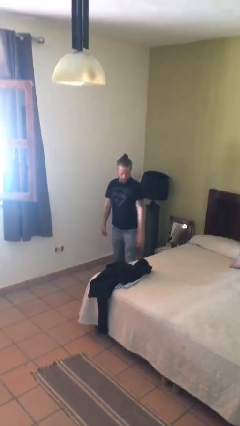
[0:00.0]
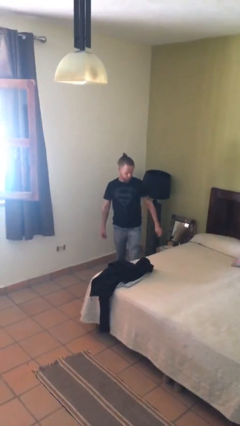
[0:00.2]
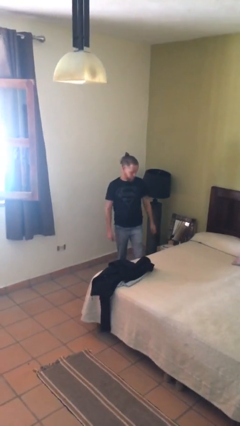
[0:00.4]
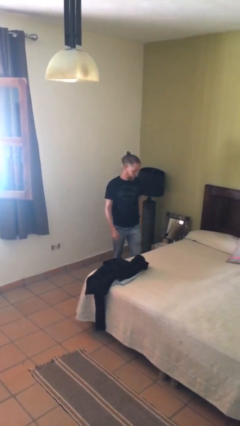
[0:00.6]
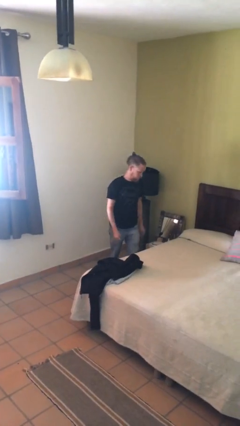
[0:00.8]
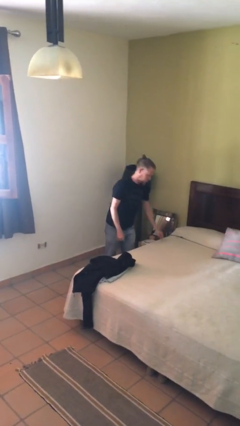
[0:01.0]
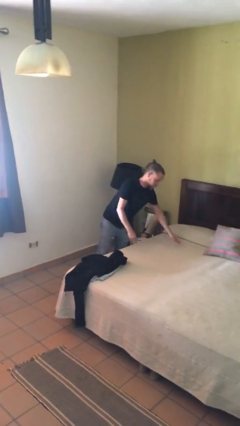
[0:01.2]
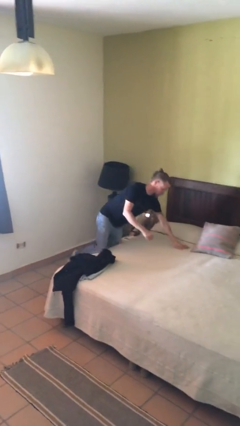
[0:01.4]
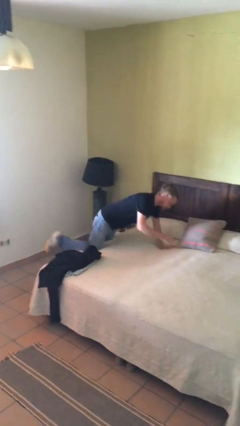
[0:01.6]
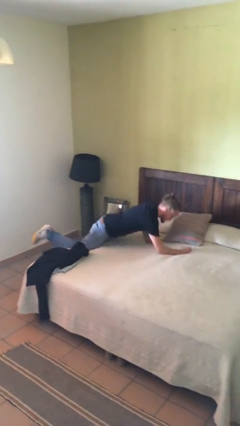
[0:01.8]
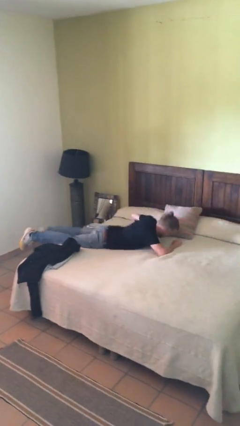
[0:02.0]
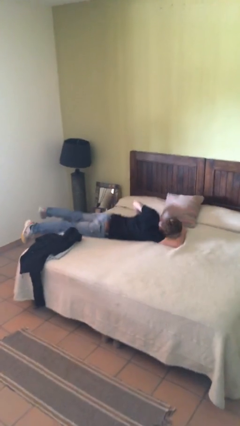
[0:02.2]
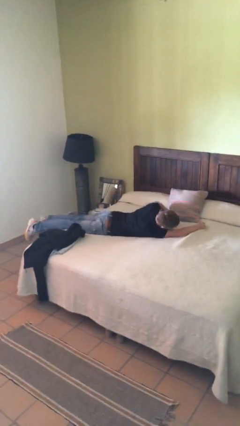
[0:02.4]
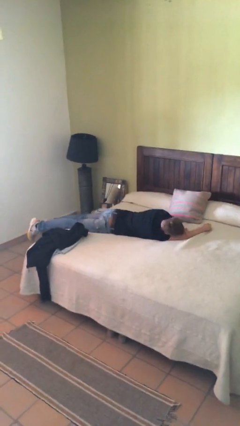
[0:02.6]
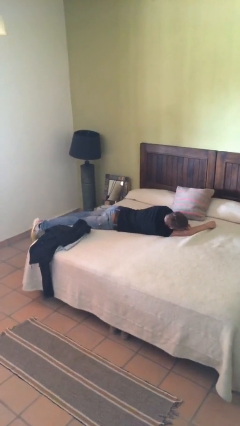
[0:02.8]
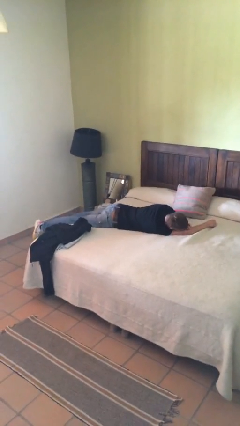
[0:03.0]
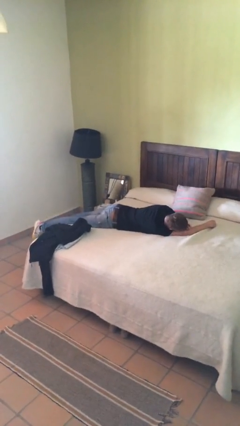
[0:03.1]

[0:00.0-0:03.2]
person lies down on bed

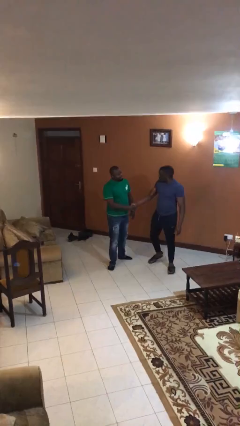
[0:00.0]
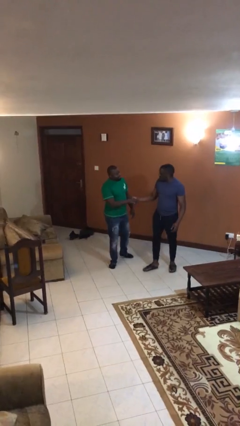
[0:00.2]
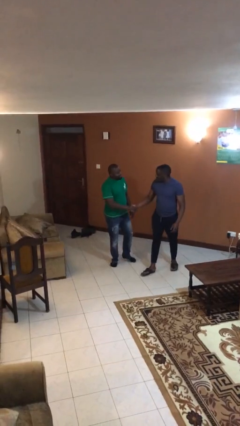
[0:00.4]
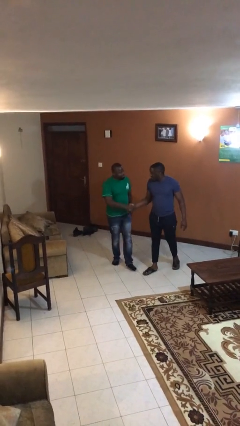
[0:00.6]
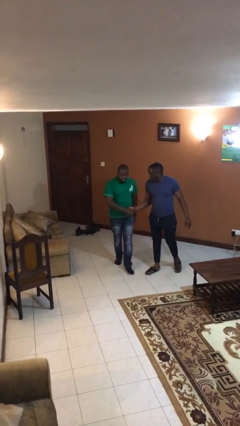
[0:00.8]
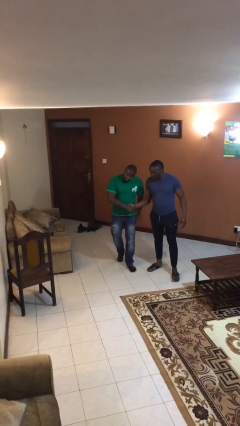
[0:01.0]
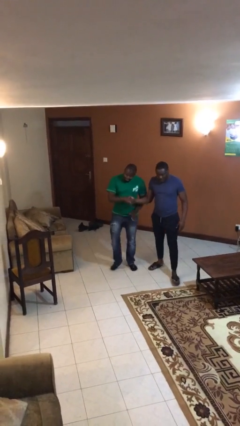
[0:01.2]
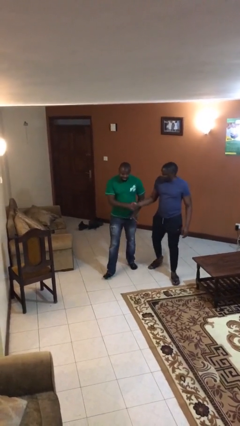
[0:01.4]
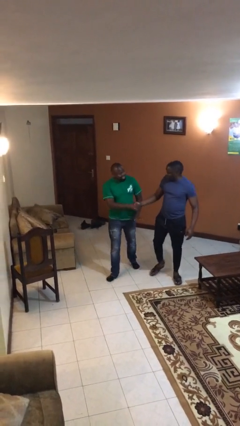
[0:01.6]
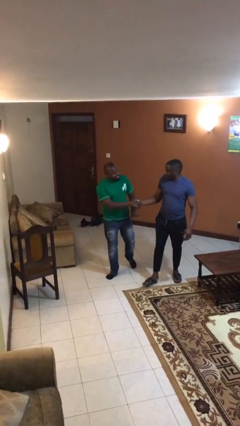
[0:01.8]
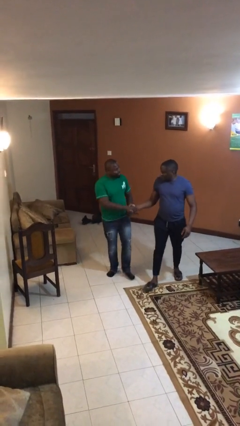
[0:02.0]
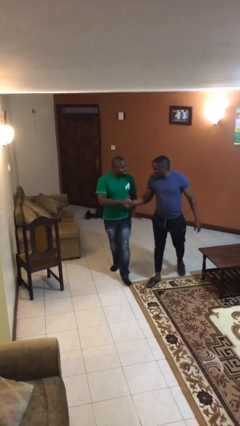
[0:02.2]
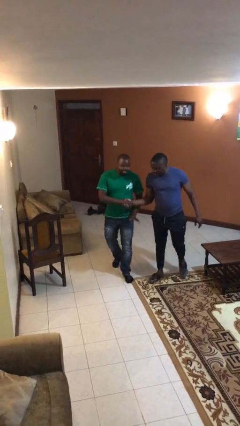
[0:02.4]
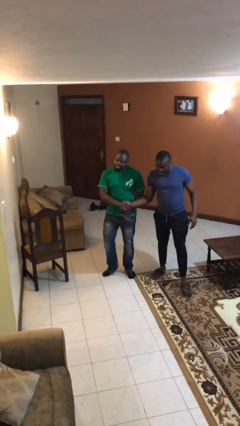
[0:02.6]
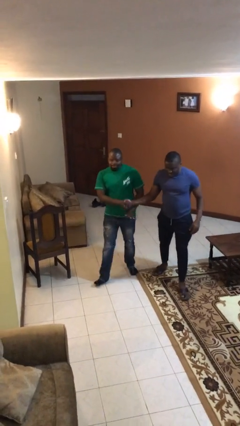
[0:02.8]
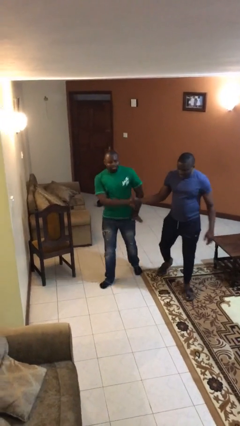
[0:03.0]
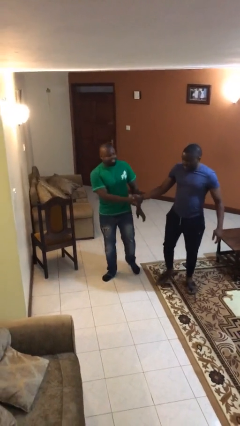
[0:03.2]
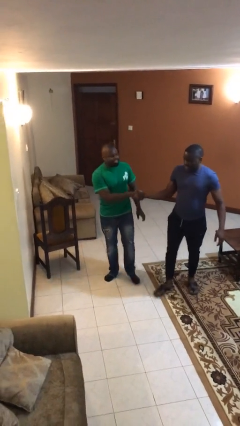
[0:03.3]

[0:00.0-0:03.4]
person holds hand

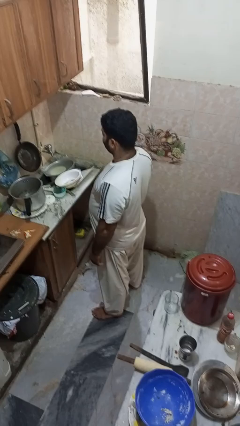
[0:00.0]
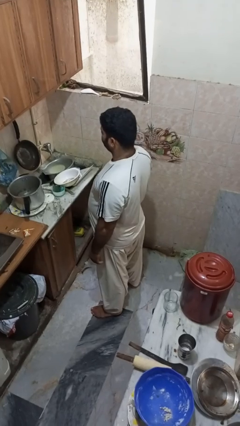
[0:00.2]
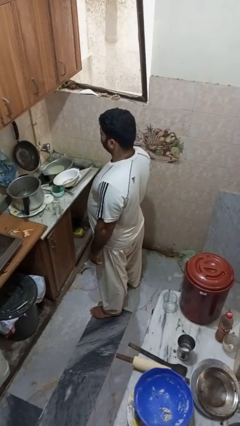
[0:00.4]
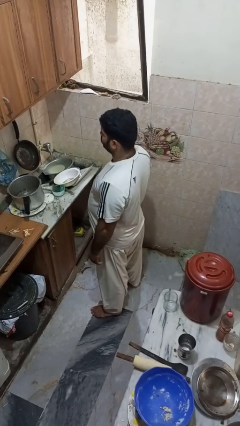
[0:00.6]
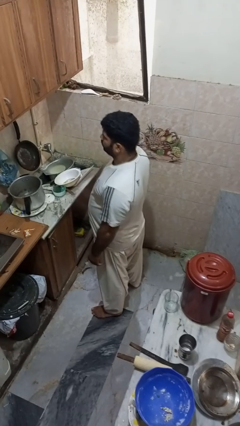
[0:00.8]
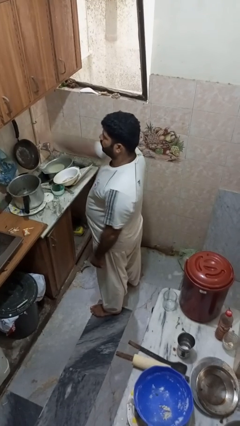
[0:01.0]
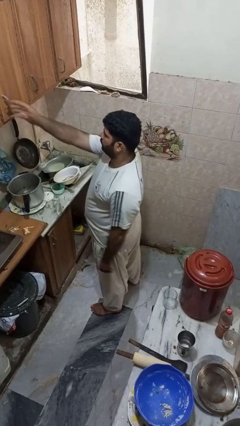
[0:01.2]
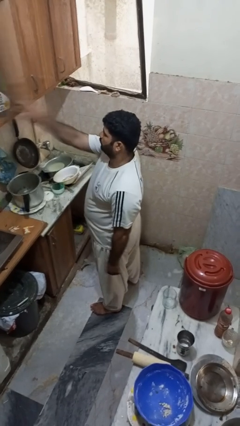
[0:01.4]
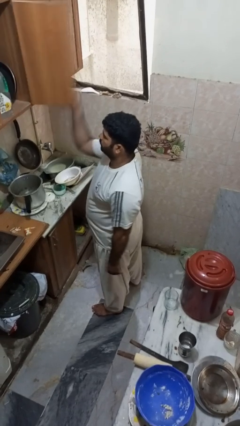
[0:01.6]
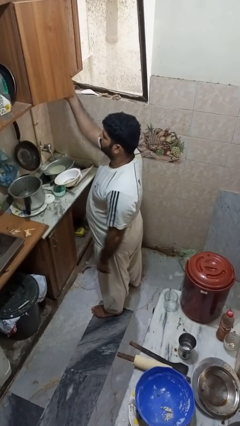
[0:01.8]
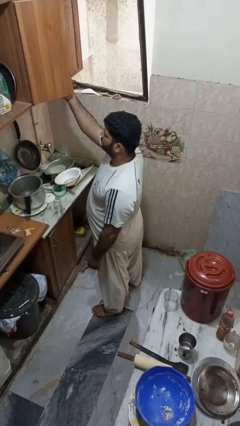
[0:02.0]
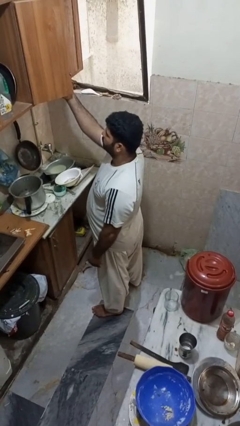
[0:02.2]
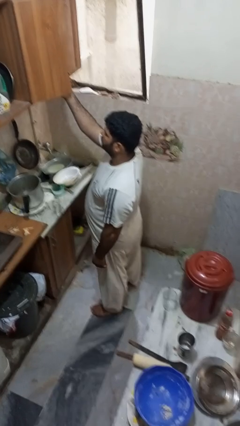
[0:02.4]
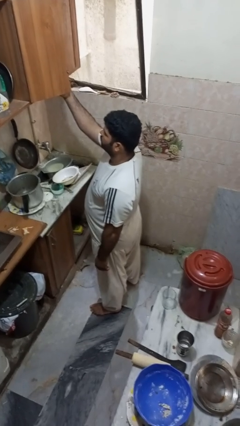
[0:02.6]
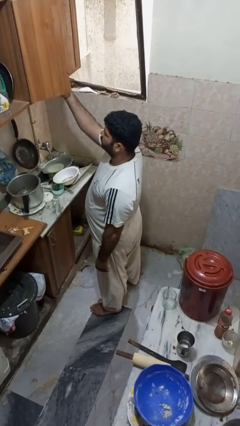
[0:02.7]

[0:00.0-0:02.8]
person opens cabinet

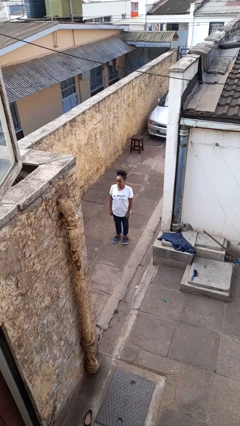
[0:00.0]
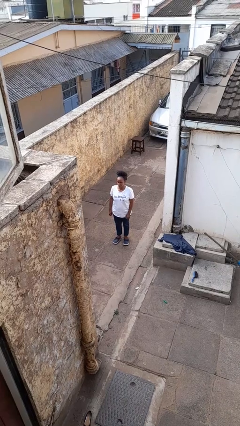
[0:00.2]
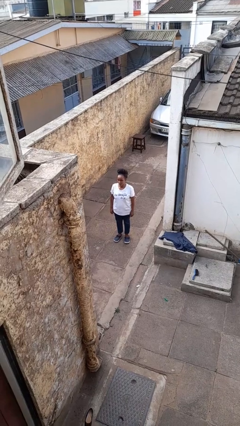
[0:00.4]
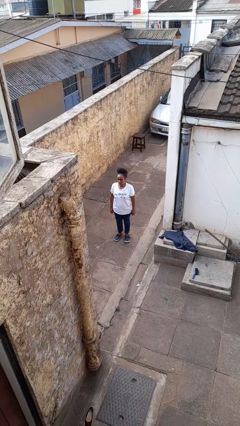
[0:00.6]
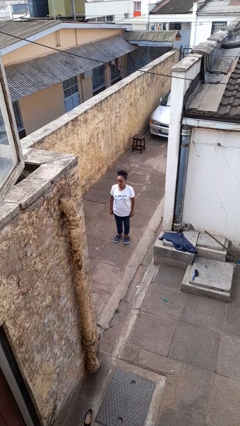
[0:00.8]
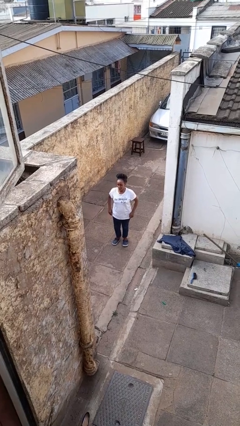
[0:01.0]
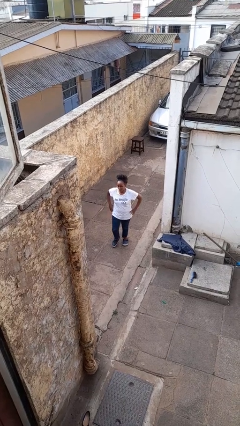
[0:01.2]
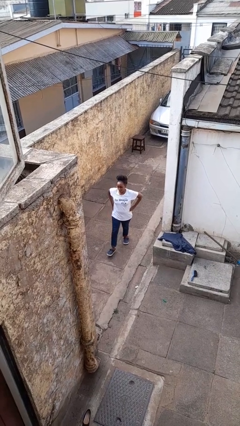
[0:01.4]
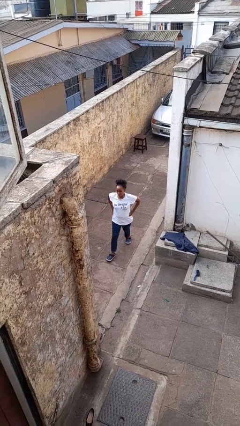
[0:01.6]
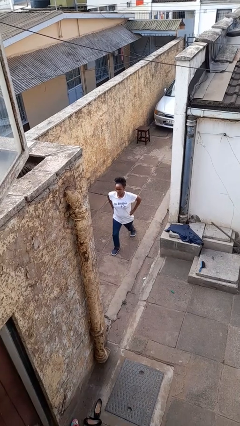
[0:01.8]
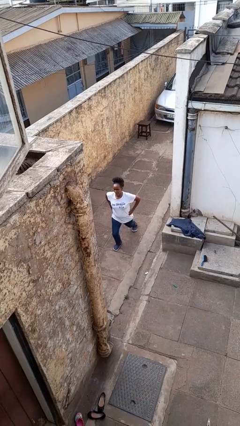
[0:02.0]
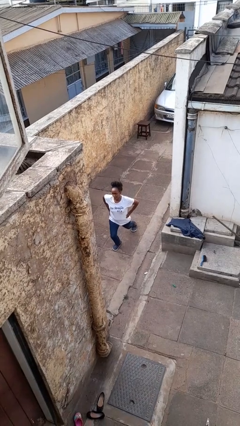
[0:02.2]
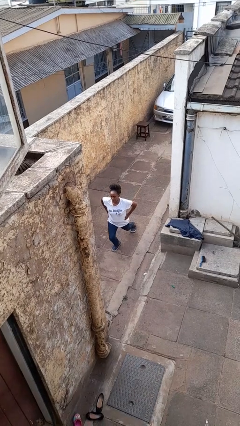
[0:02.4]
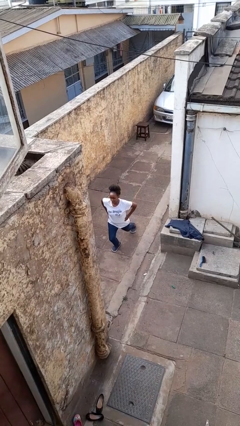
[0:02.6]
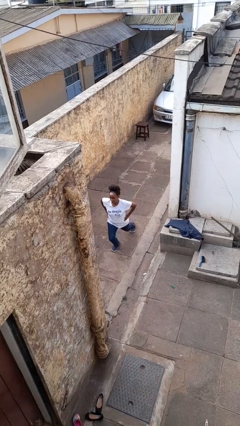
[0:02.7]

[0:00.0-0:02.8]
person exercises with lunges

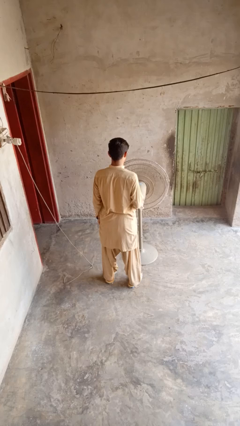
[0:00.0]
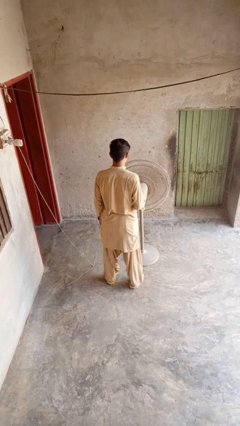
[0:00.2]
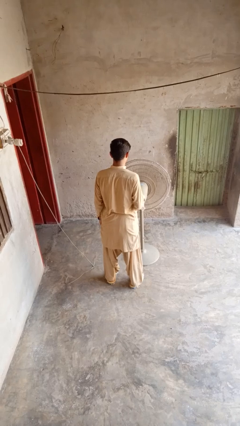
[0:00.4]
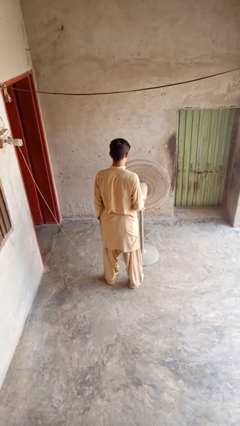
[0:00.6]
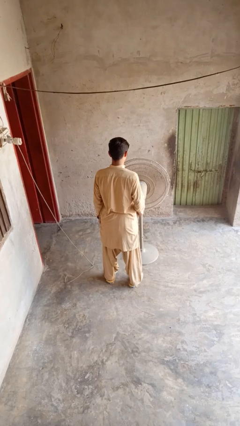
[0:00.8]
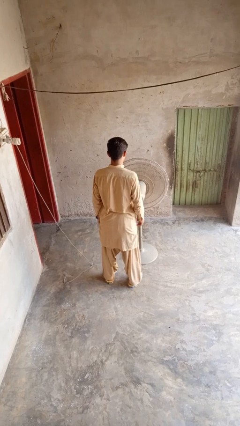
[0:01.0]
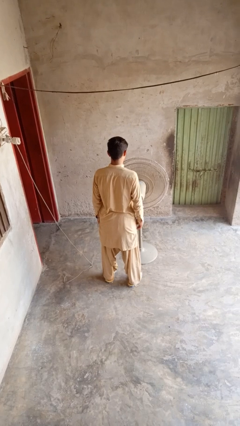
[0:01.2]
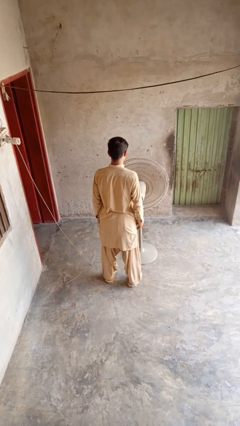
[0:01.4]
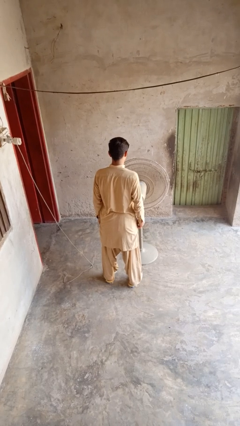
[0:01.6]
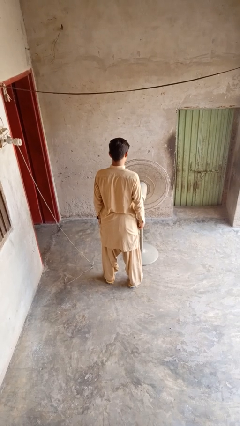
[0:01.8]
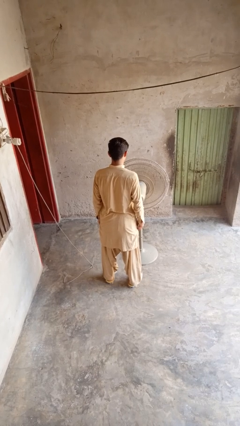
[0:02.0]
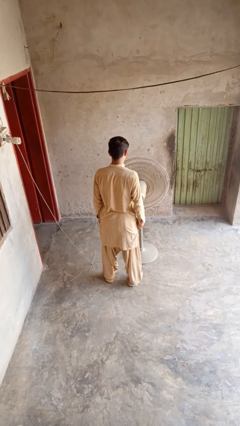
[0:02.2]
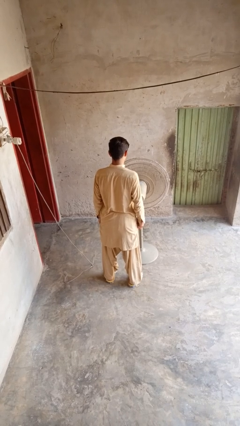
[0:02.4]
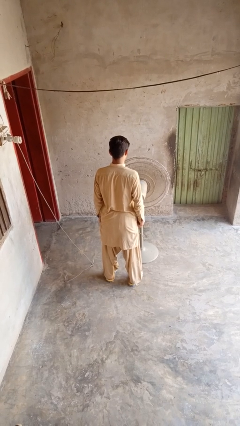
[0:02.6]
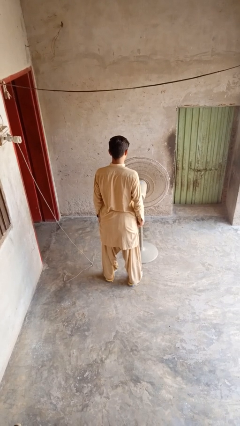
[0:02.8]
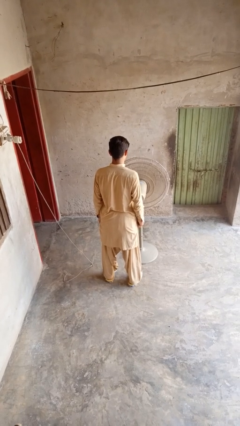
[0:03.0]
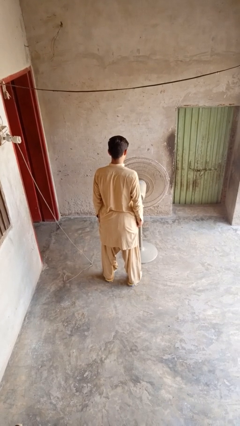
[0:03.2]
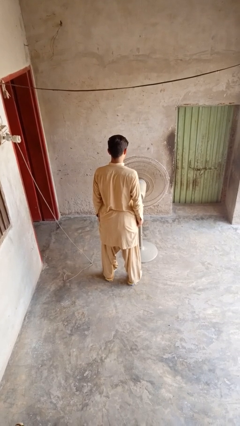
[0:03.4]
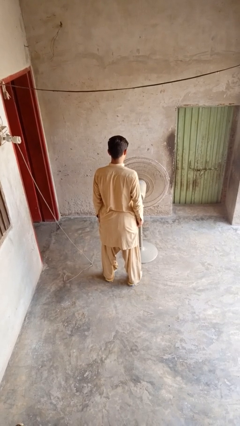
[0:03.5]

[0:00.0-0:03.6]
person turns off fan

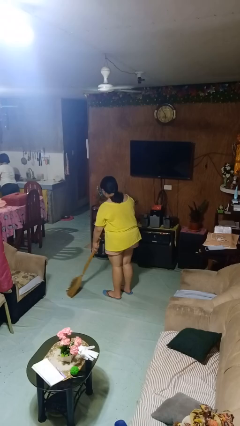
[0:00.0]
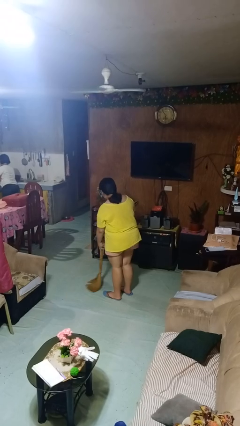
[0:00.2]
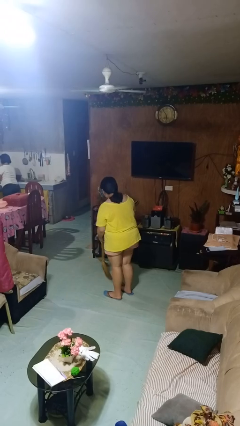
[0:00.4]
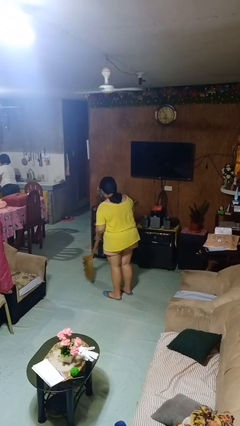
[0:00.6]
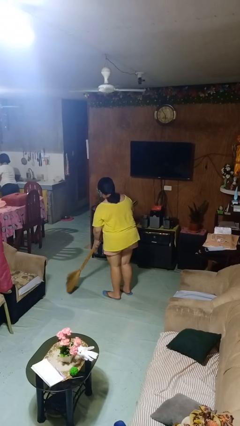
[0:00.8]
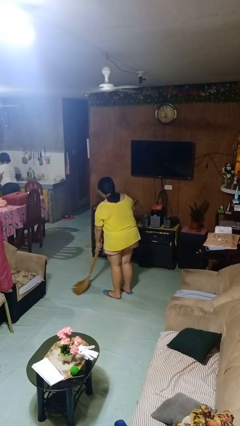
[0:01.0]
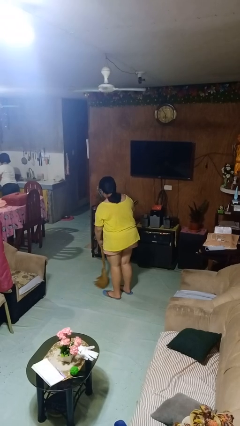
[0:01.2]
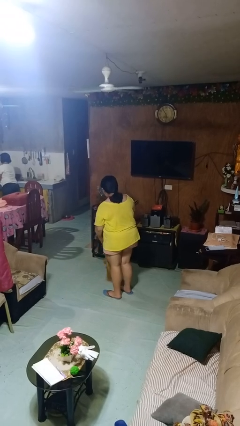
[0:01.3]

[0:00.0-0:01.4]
person sweeps floor

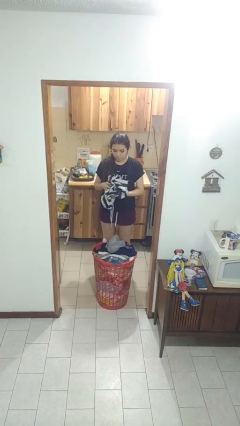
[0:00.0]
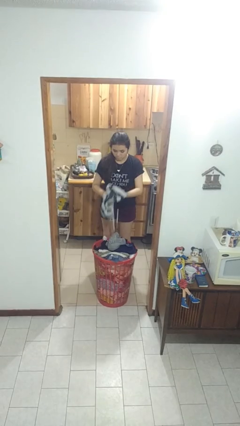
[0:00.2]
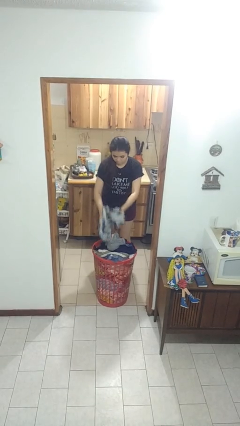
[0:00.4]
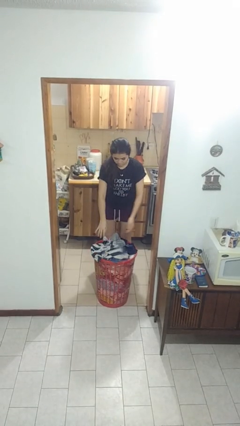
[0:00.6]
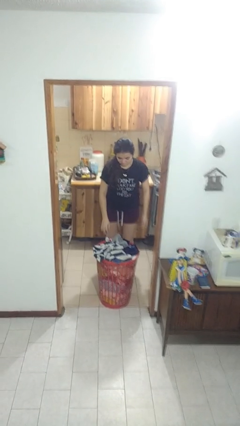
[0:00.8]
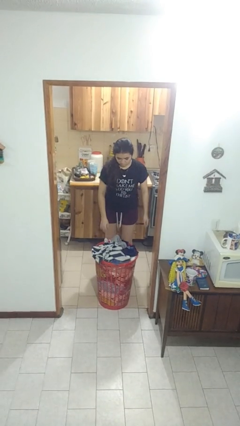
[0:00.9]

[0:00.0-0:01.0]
person puts object into basket
